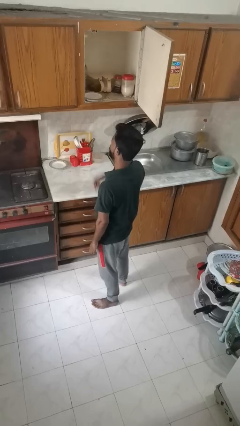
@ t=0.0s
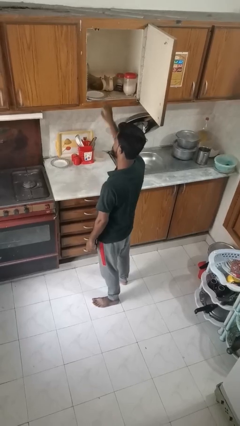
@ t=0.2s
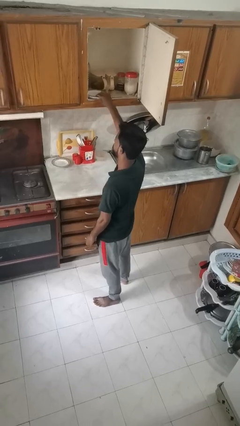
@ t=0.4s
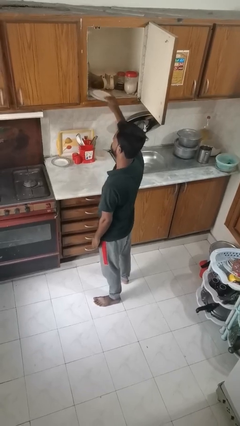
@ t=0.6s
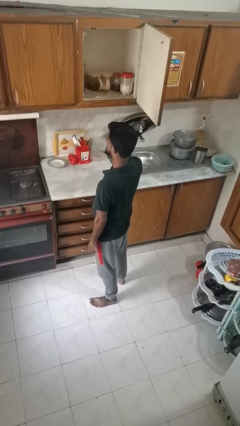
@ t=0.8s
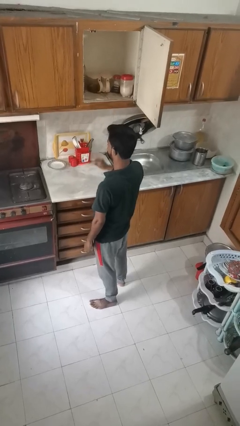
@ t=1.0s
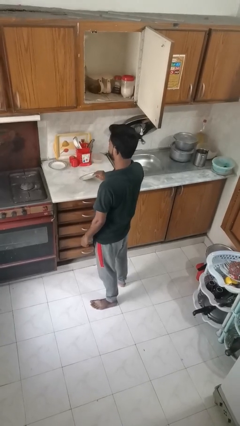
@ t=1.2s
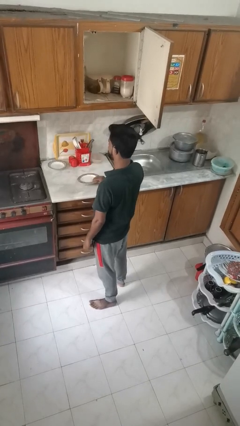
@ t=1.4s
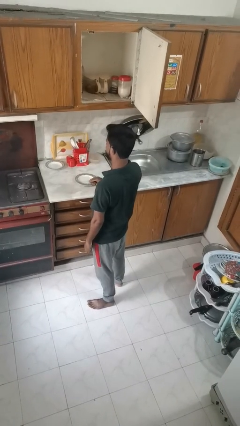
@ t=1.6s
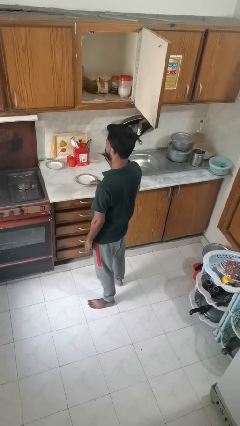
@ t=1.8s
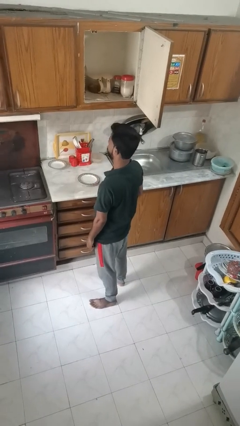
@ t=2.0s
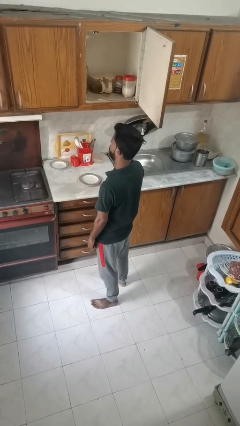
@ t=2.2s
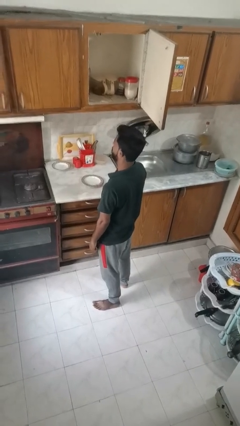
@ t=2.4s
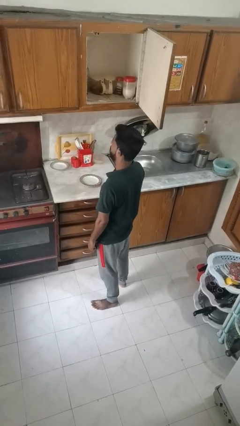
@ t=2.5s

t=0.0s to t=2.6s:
person takes object from cabinet

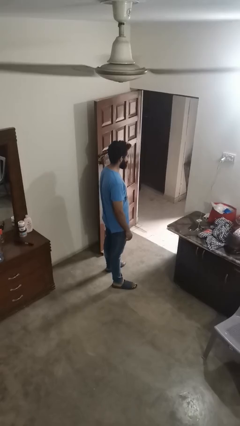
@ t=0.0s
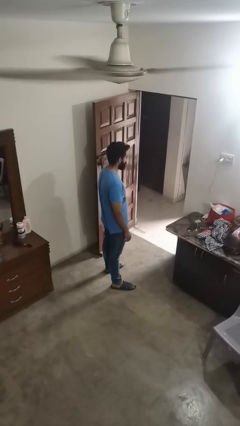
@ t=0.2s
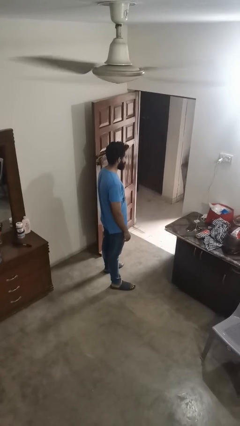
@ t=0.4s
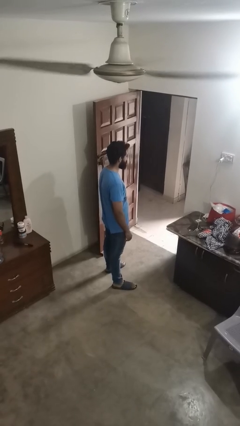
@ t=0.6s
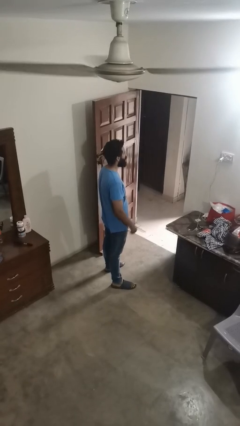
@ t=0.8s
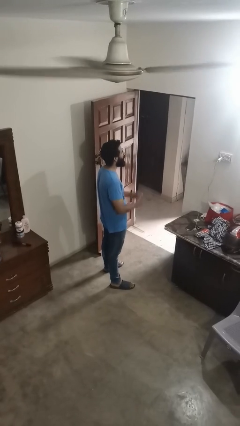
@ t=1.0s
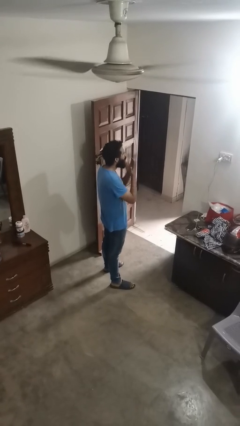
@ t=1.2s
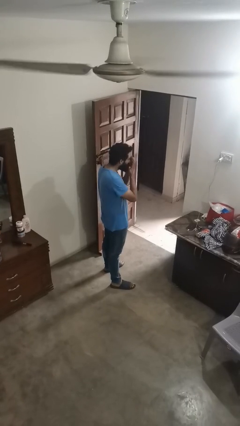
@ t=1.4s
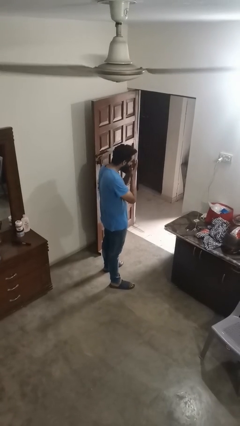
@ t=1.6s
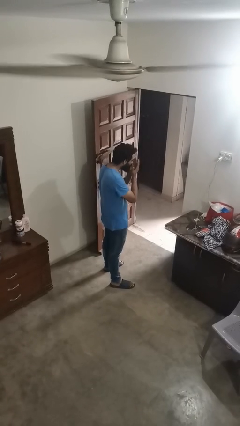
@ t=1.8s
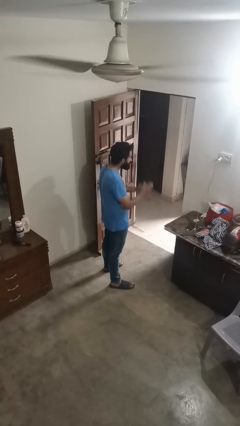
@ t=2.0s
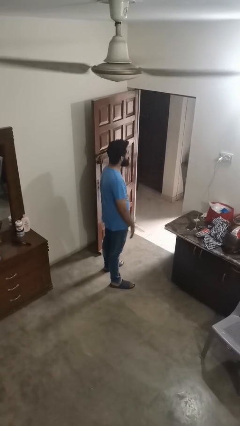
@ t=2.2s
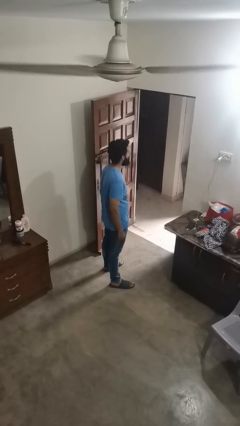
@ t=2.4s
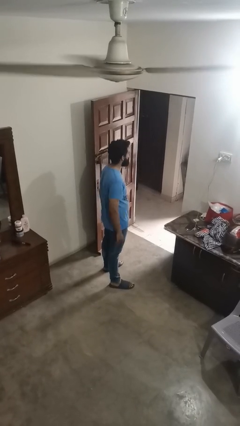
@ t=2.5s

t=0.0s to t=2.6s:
person sneezes into hand

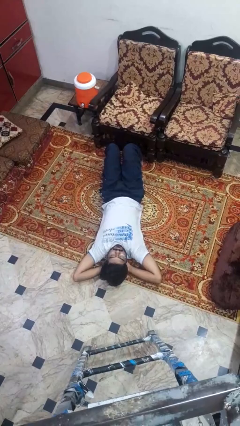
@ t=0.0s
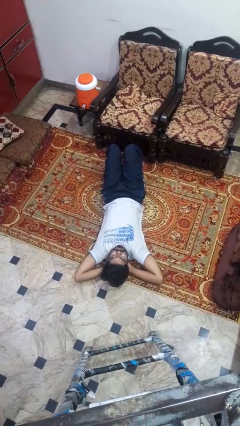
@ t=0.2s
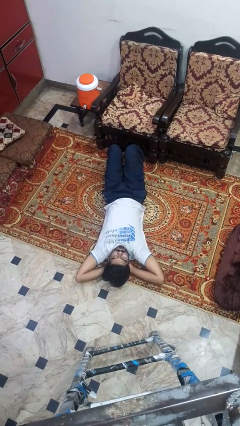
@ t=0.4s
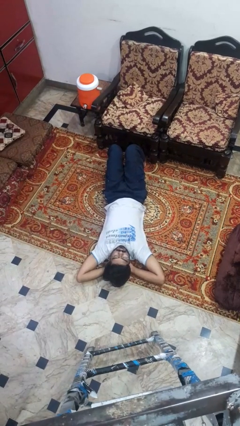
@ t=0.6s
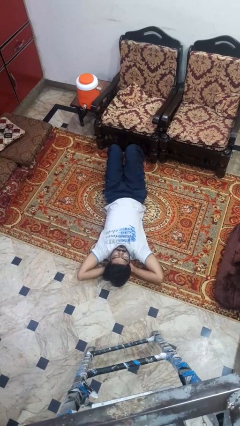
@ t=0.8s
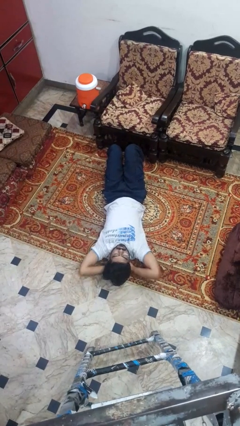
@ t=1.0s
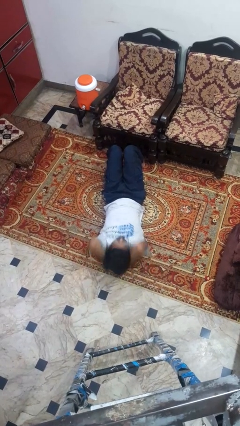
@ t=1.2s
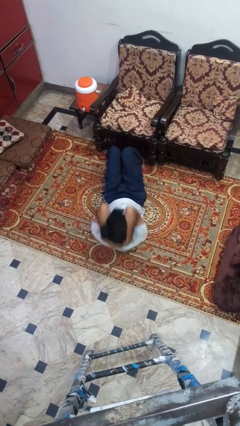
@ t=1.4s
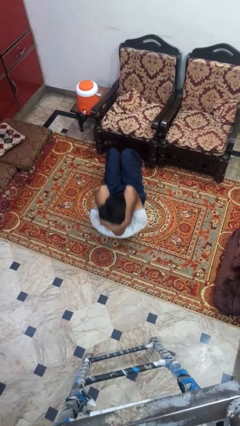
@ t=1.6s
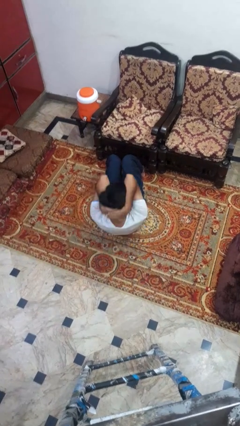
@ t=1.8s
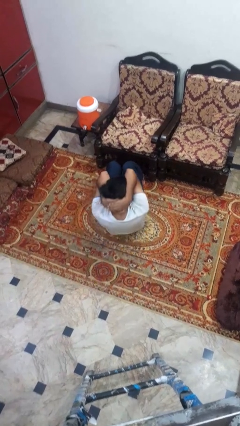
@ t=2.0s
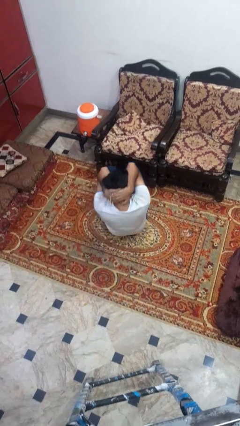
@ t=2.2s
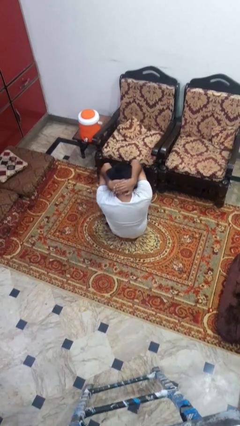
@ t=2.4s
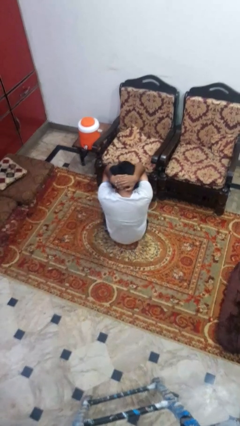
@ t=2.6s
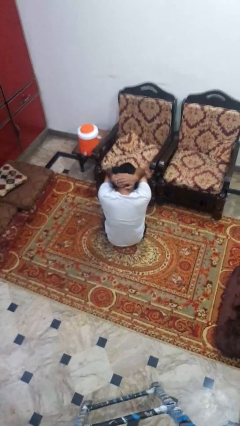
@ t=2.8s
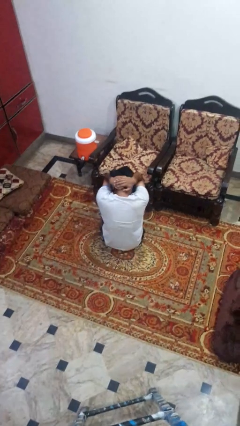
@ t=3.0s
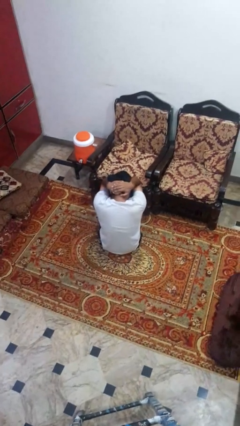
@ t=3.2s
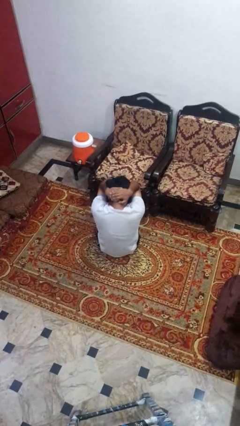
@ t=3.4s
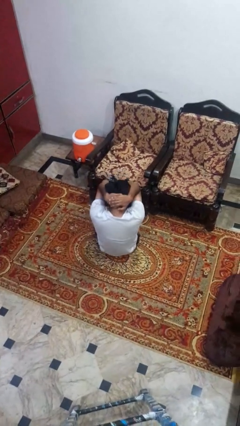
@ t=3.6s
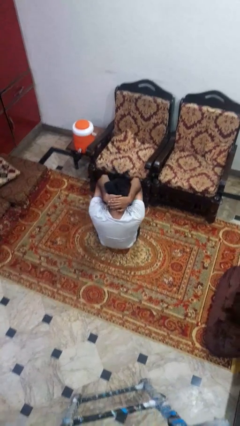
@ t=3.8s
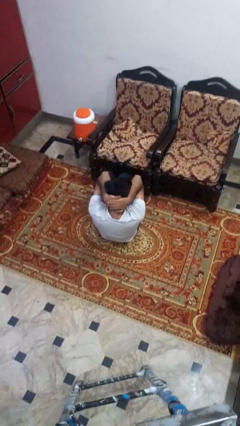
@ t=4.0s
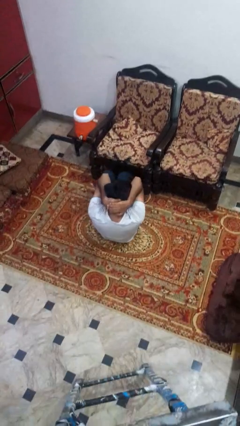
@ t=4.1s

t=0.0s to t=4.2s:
person exercises with situp

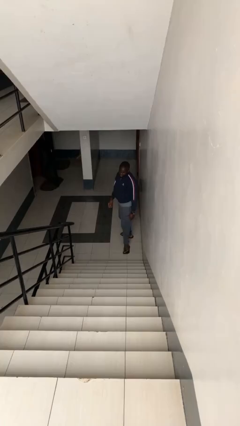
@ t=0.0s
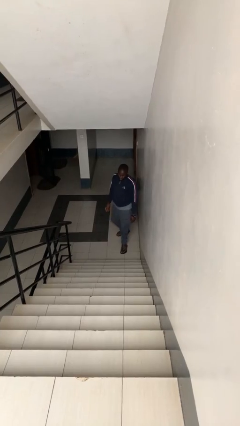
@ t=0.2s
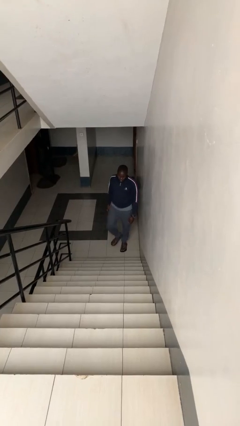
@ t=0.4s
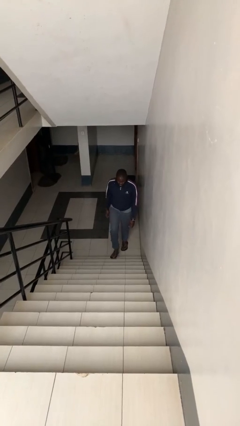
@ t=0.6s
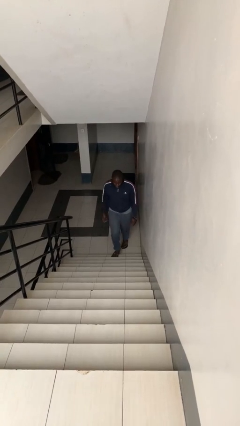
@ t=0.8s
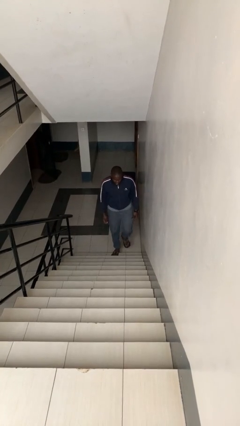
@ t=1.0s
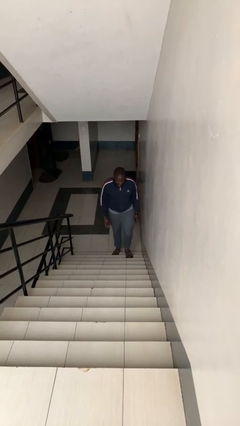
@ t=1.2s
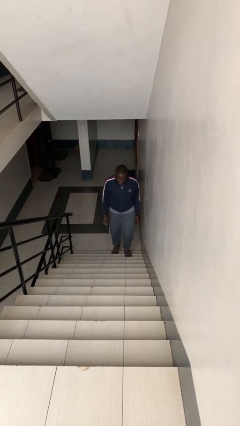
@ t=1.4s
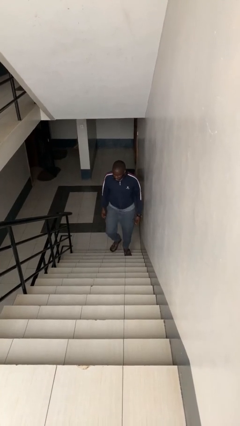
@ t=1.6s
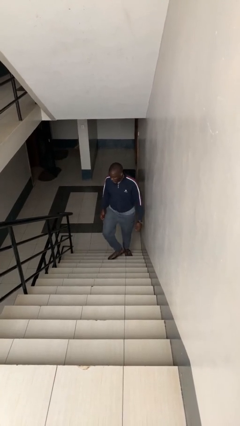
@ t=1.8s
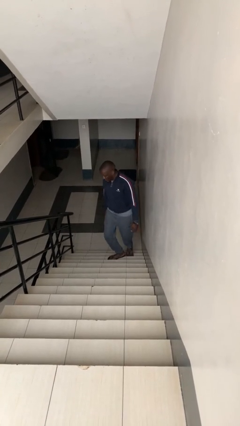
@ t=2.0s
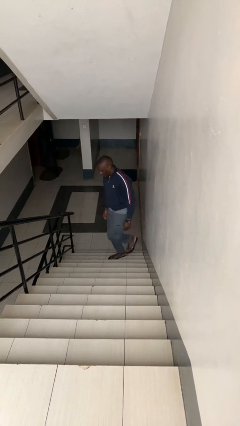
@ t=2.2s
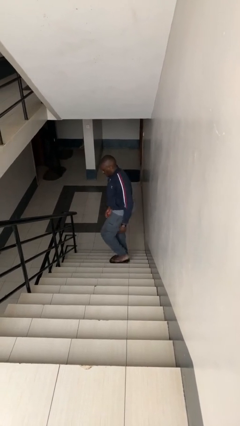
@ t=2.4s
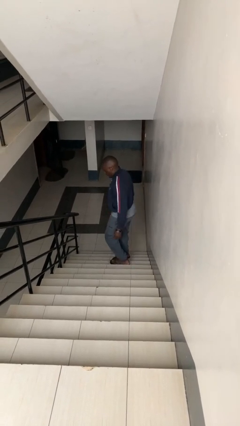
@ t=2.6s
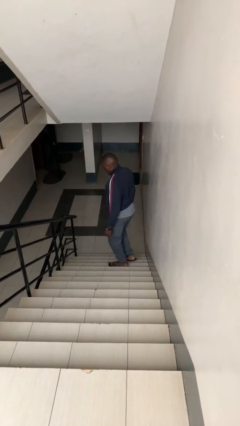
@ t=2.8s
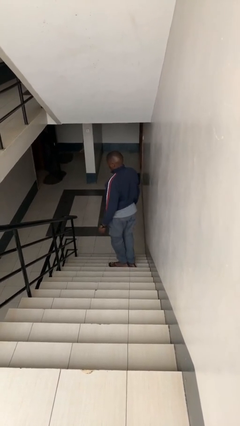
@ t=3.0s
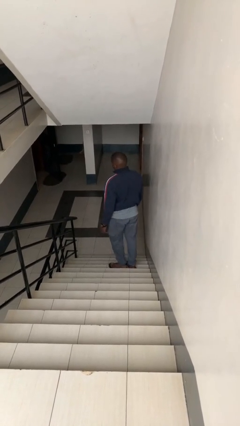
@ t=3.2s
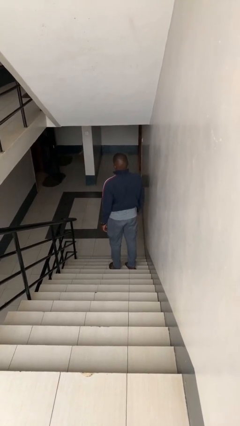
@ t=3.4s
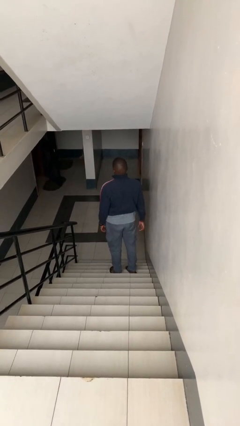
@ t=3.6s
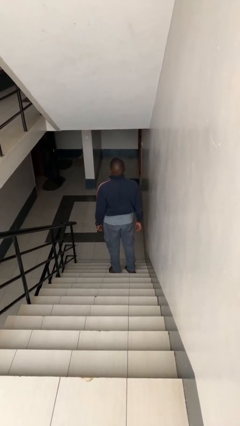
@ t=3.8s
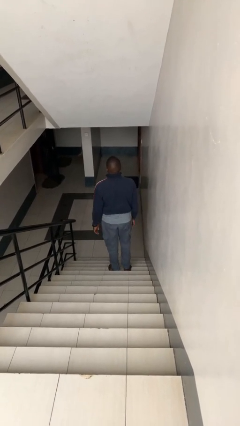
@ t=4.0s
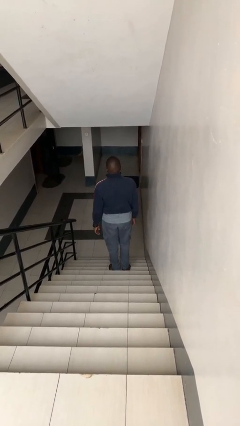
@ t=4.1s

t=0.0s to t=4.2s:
person climbs up stairs

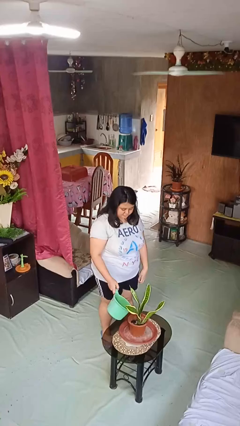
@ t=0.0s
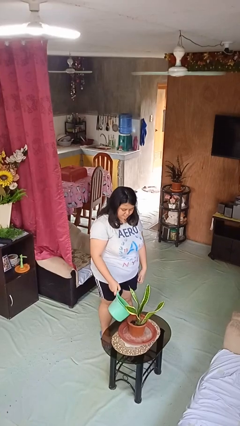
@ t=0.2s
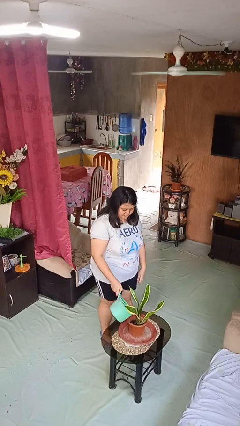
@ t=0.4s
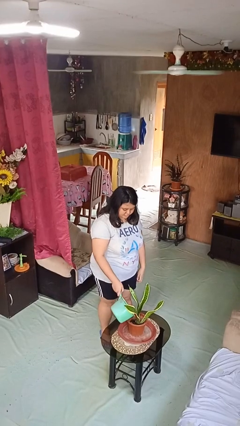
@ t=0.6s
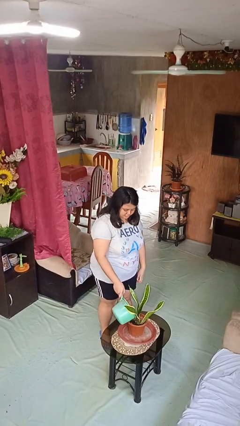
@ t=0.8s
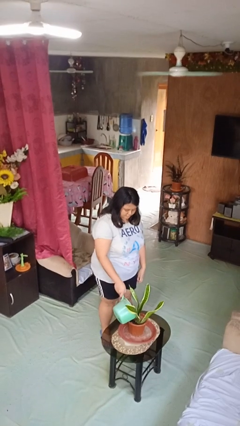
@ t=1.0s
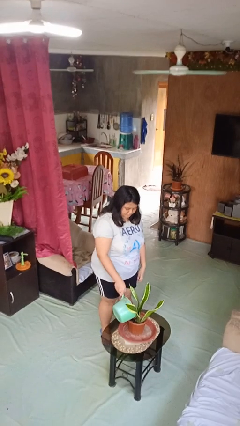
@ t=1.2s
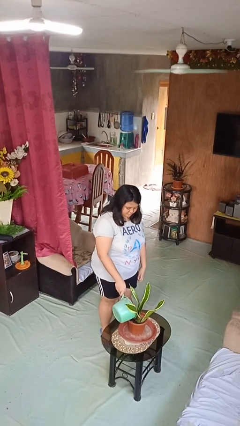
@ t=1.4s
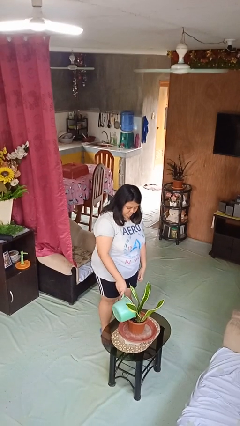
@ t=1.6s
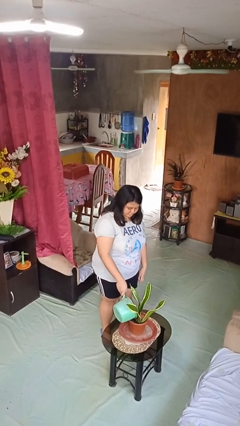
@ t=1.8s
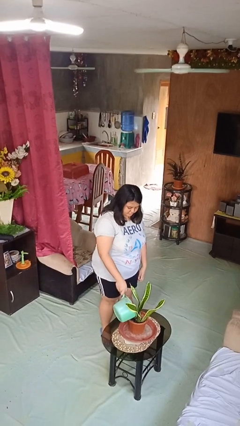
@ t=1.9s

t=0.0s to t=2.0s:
person waters houseplant

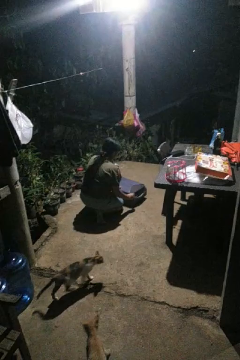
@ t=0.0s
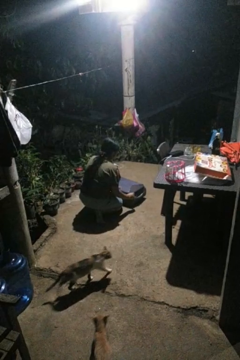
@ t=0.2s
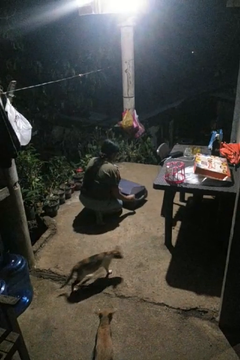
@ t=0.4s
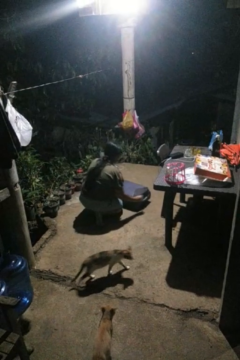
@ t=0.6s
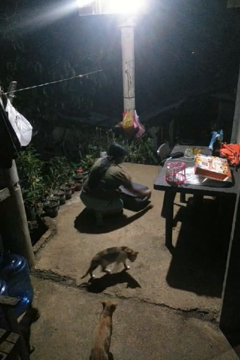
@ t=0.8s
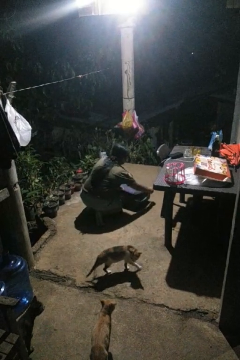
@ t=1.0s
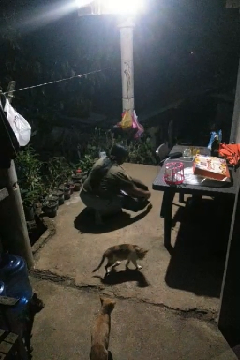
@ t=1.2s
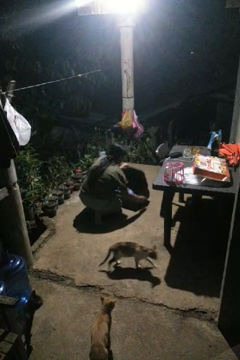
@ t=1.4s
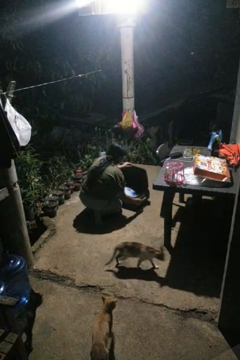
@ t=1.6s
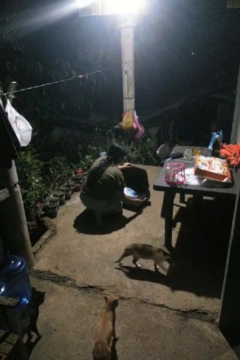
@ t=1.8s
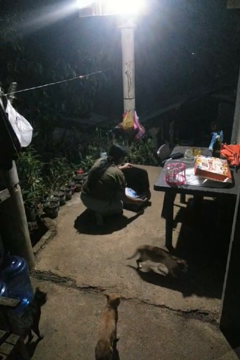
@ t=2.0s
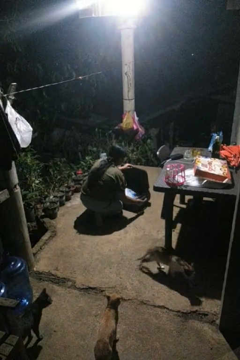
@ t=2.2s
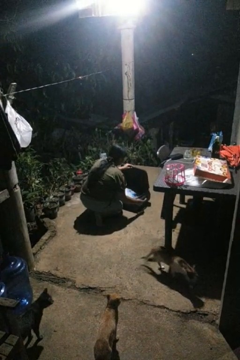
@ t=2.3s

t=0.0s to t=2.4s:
person opens suitcase
